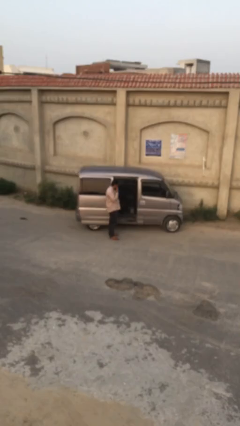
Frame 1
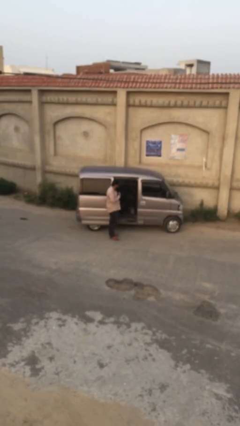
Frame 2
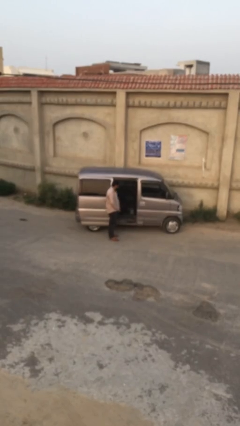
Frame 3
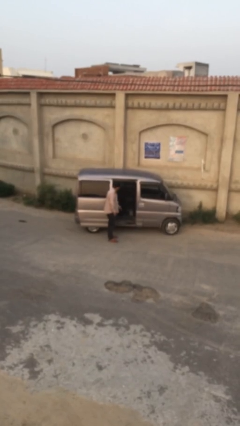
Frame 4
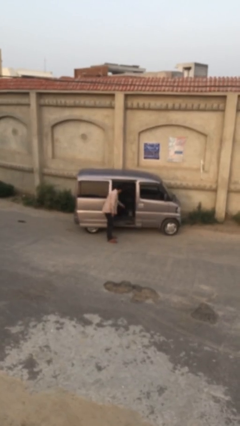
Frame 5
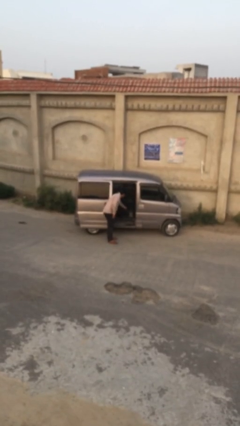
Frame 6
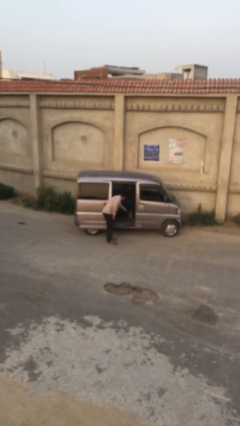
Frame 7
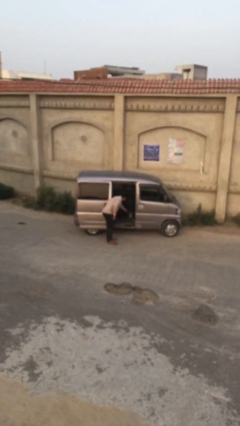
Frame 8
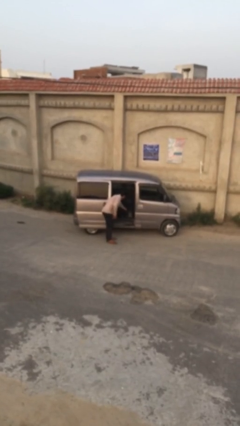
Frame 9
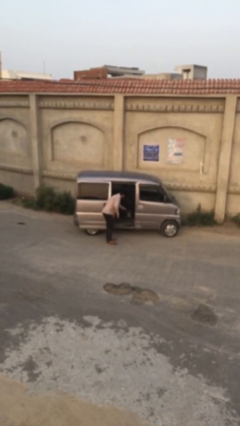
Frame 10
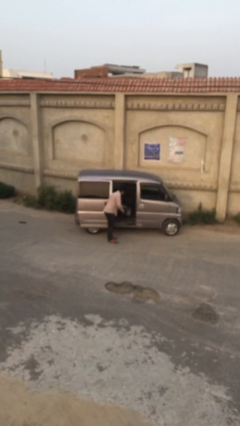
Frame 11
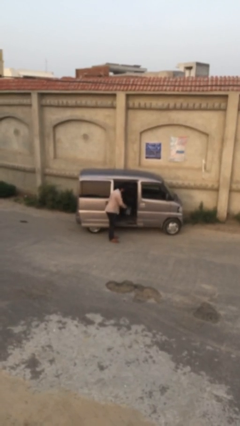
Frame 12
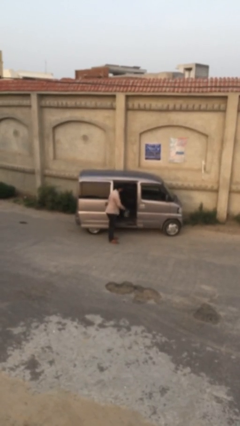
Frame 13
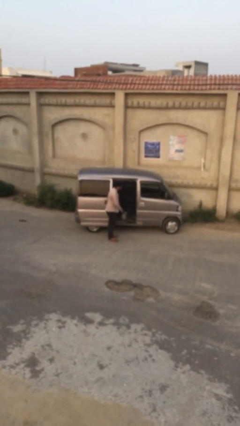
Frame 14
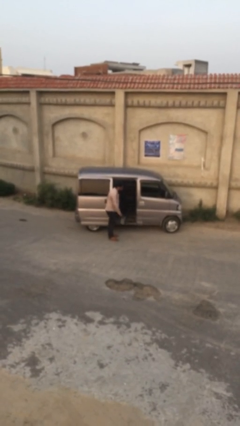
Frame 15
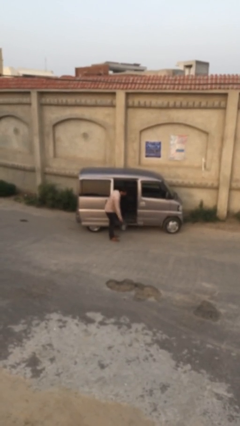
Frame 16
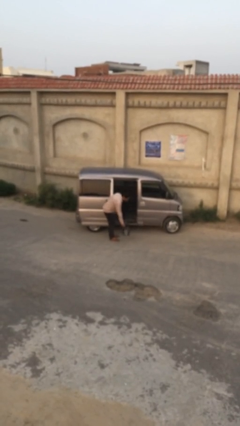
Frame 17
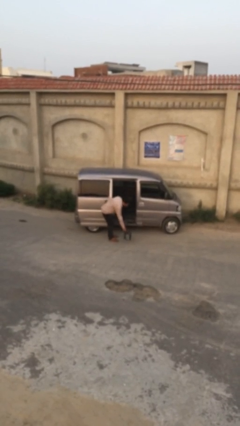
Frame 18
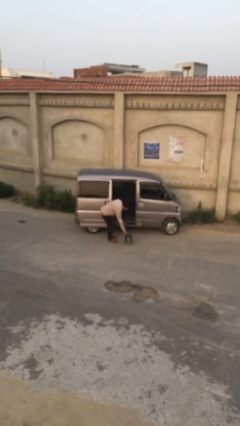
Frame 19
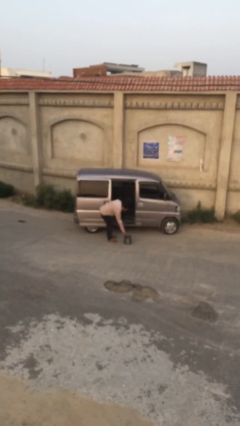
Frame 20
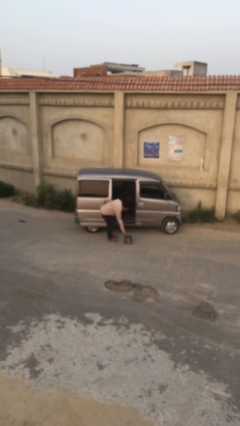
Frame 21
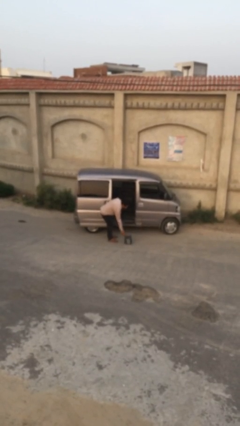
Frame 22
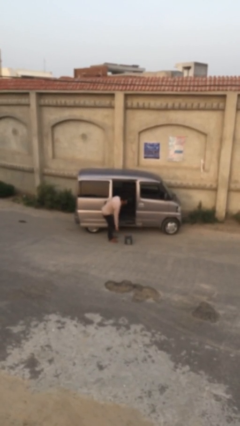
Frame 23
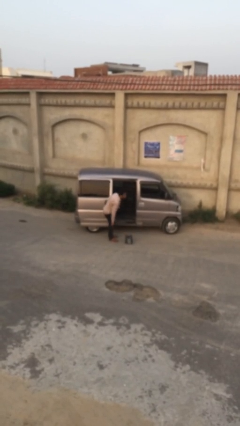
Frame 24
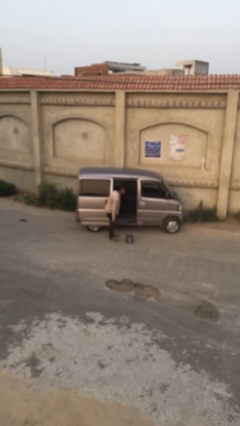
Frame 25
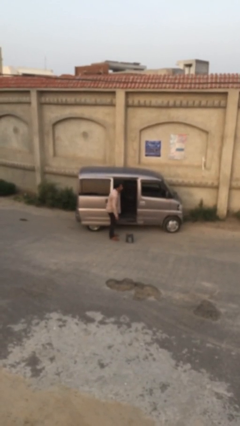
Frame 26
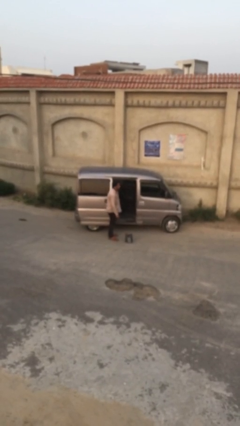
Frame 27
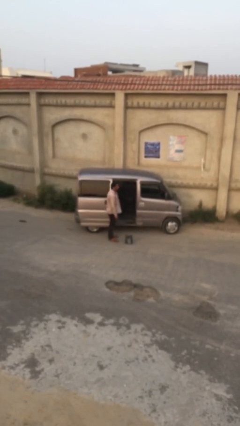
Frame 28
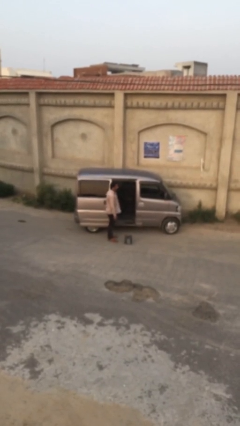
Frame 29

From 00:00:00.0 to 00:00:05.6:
person unloads car

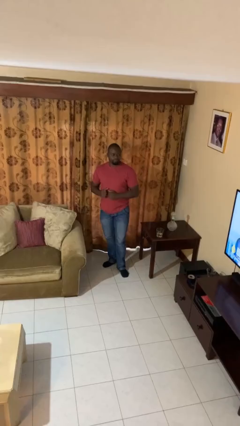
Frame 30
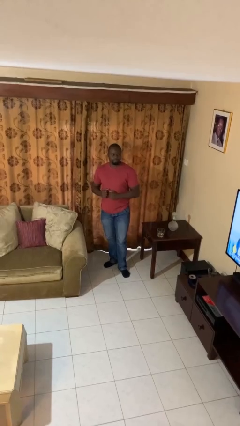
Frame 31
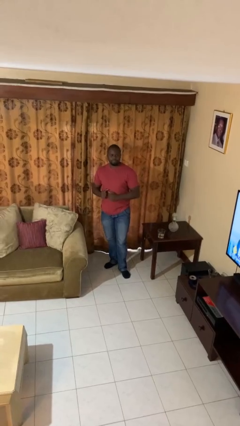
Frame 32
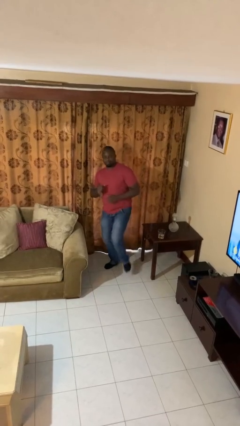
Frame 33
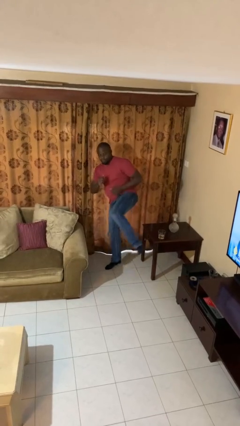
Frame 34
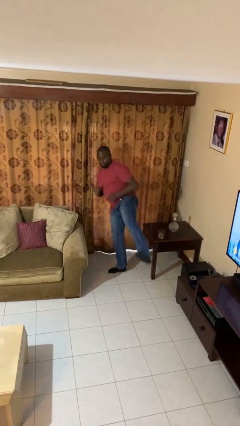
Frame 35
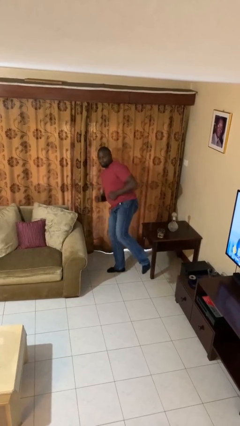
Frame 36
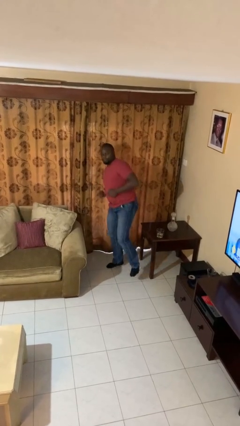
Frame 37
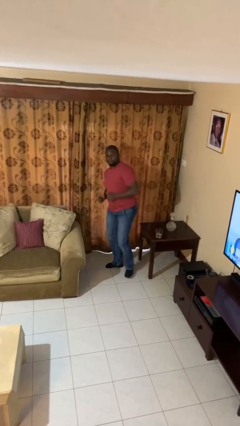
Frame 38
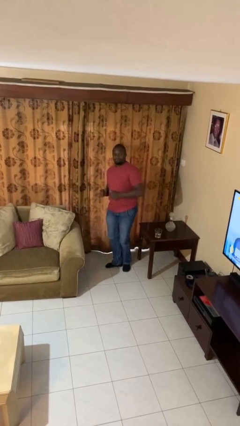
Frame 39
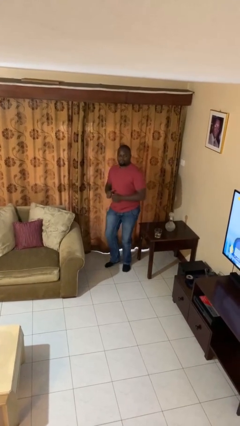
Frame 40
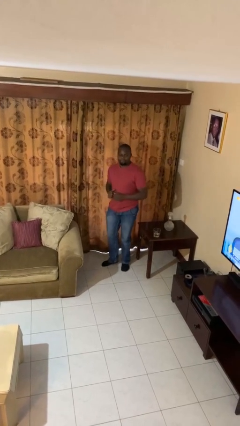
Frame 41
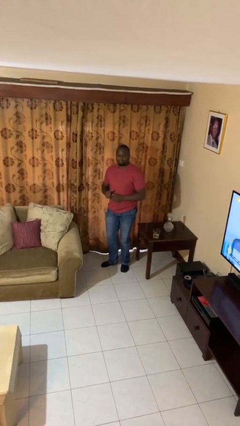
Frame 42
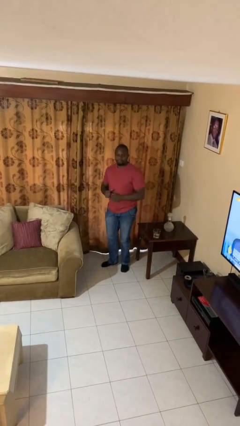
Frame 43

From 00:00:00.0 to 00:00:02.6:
person karate kicks

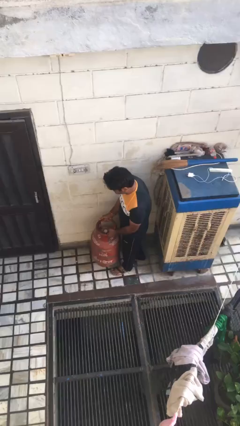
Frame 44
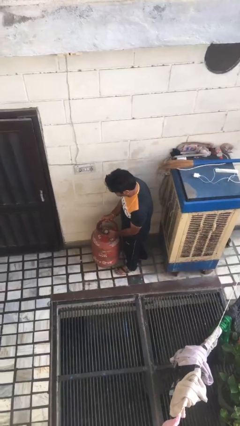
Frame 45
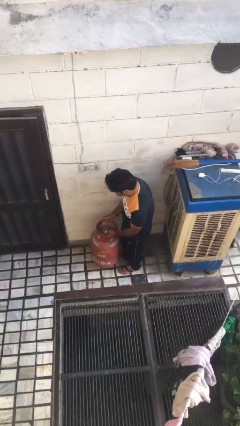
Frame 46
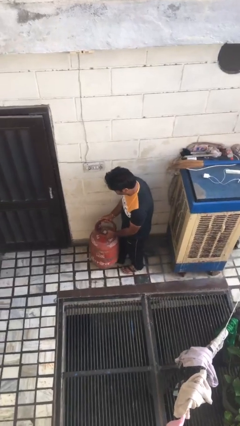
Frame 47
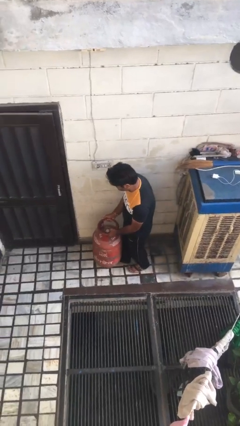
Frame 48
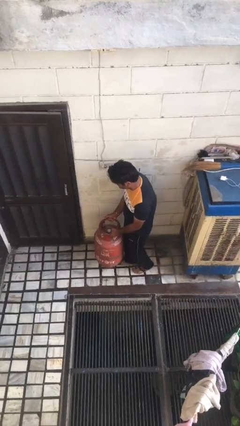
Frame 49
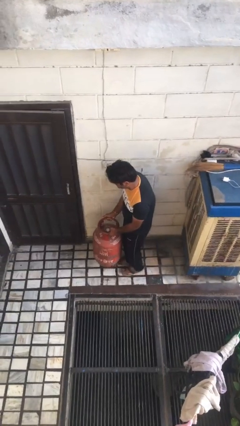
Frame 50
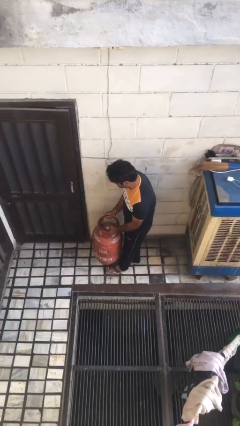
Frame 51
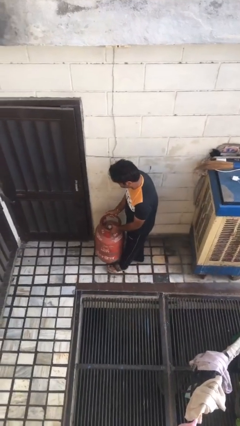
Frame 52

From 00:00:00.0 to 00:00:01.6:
person picks up object from floor

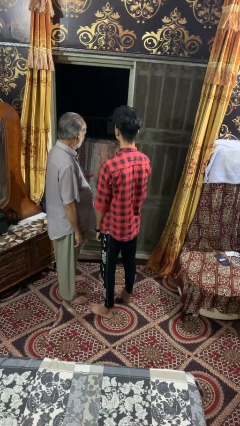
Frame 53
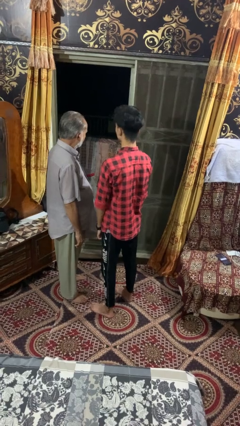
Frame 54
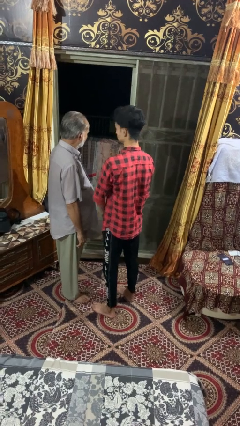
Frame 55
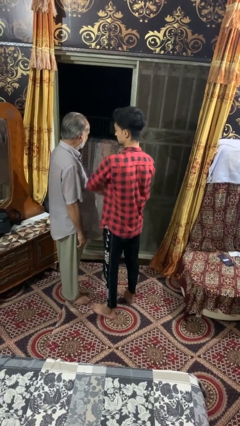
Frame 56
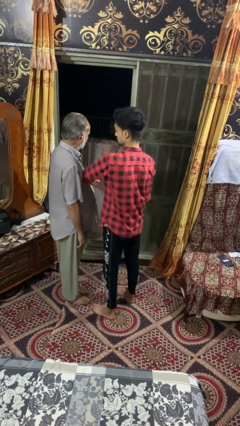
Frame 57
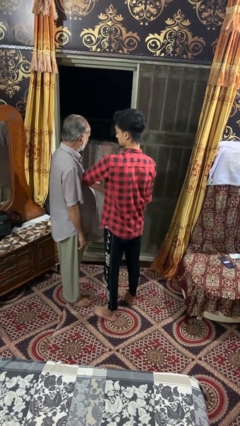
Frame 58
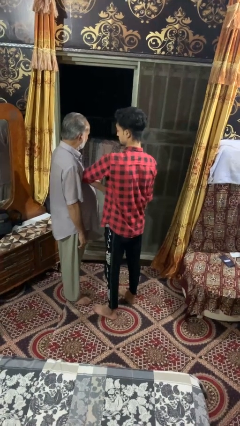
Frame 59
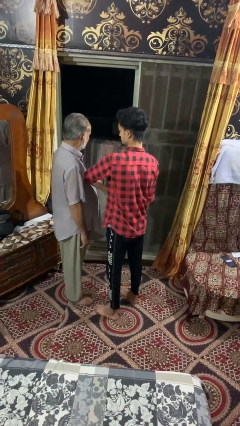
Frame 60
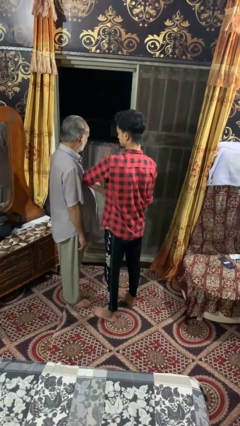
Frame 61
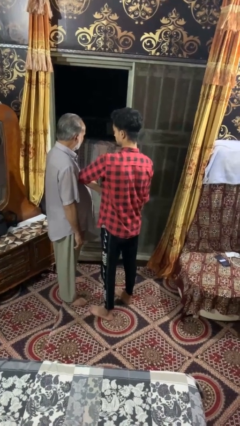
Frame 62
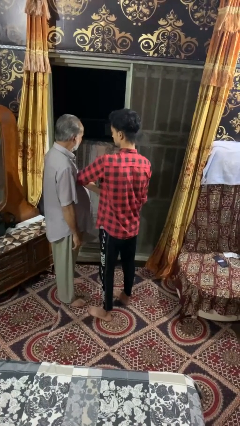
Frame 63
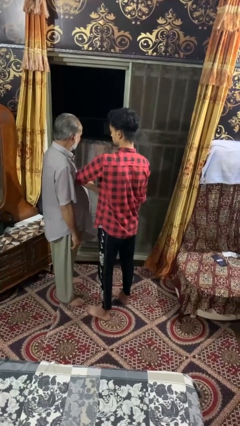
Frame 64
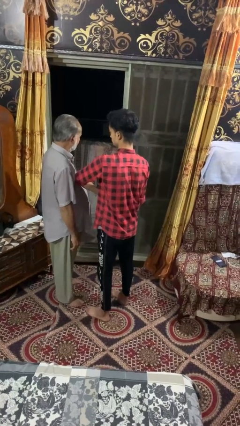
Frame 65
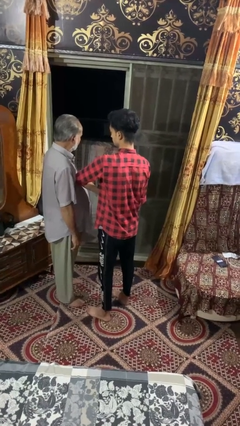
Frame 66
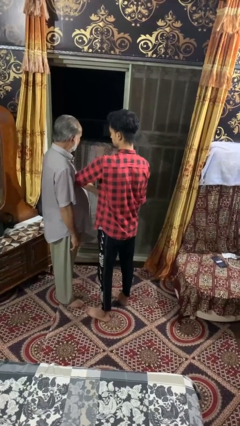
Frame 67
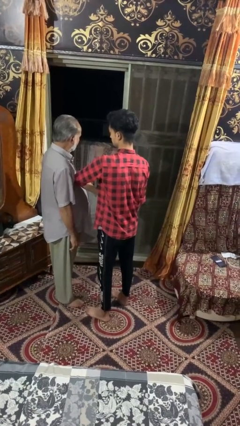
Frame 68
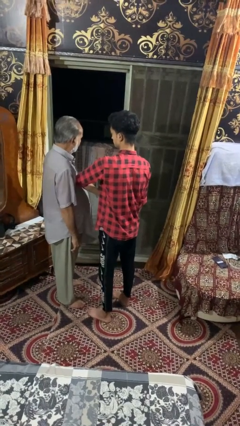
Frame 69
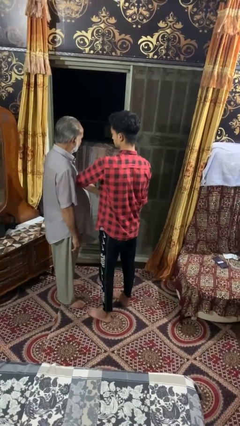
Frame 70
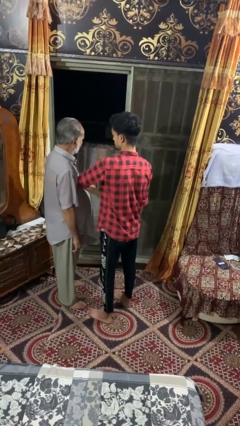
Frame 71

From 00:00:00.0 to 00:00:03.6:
person nudges person with elbow

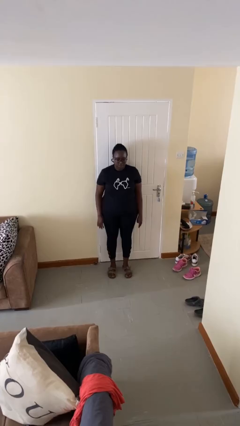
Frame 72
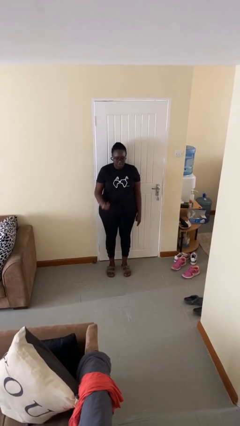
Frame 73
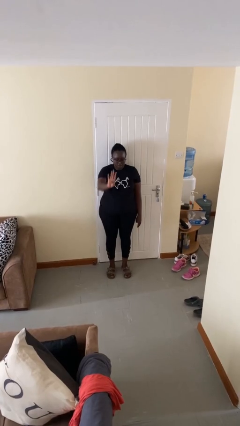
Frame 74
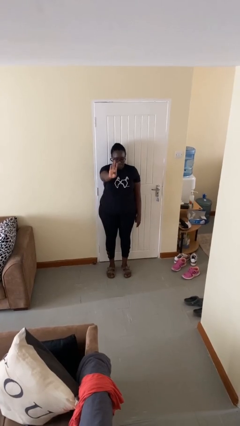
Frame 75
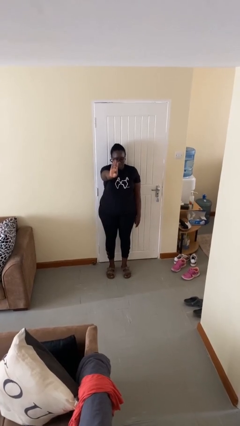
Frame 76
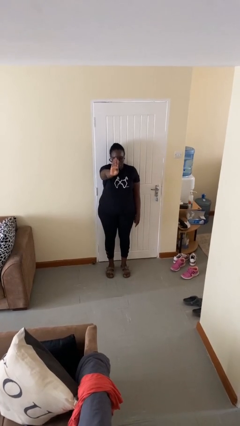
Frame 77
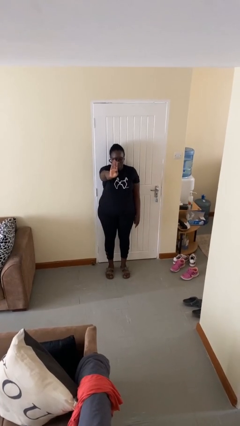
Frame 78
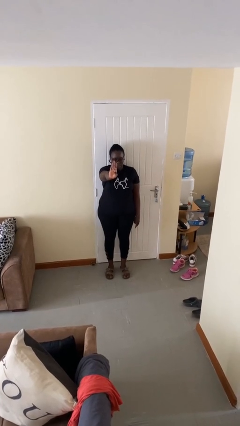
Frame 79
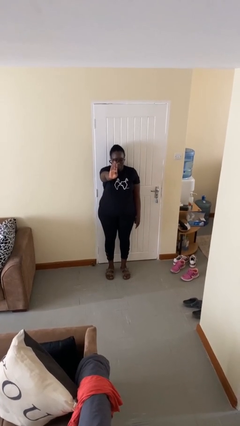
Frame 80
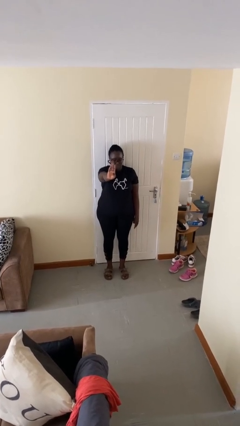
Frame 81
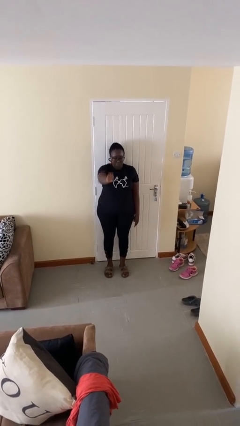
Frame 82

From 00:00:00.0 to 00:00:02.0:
person gestures number four

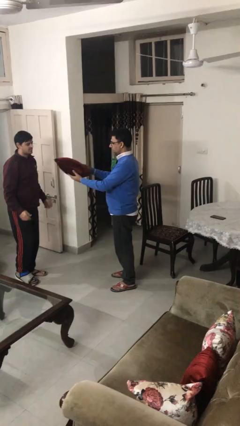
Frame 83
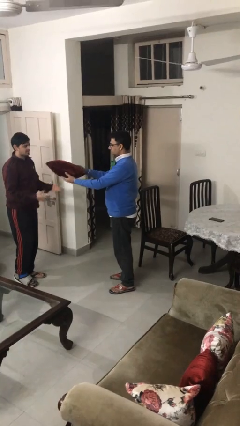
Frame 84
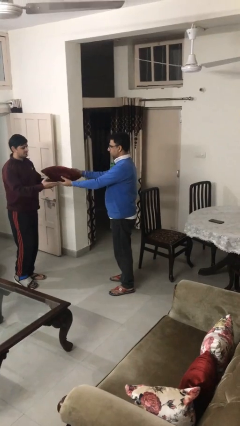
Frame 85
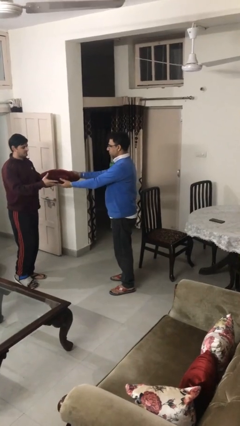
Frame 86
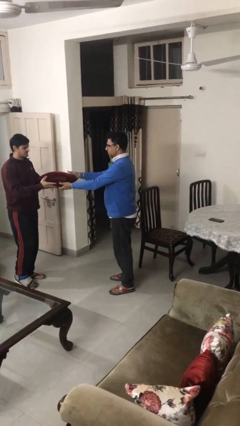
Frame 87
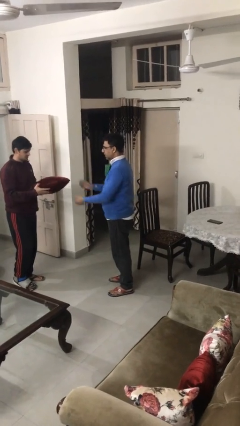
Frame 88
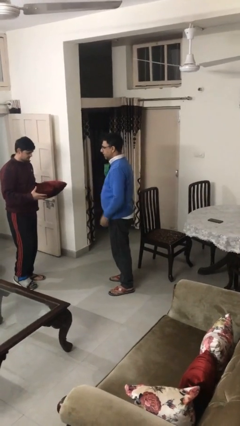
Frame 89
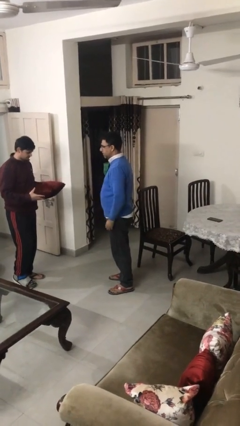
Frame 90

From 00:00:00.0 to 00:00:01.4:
person transfers object to person

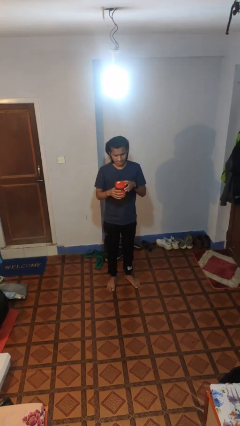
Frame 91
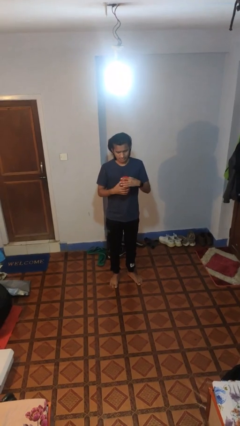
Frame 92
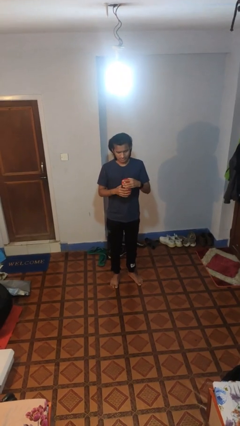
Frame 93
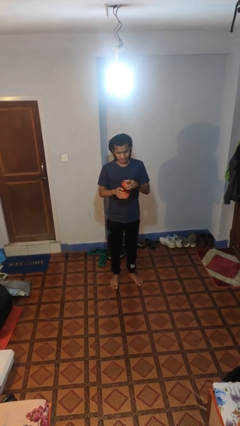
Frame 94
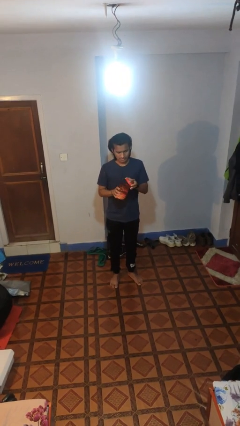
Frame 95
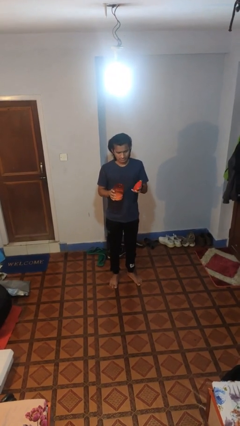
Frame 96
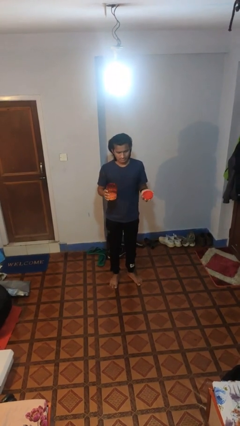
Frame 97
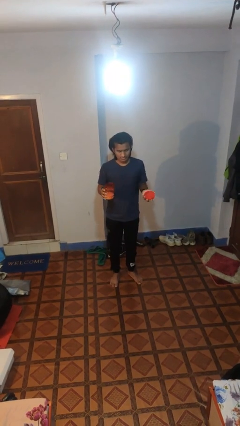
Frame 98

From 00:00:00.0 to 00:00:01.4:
person opens jar
